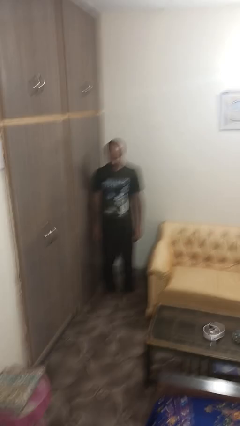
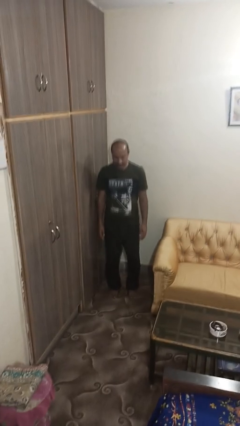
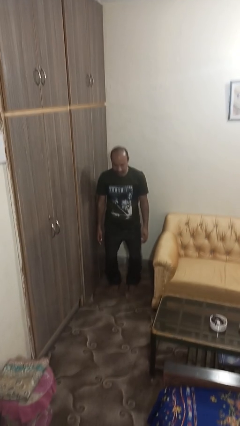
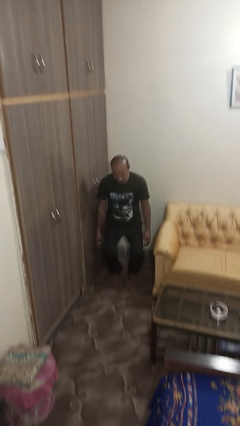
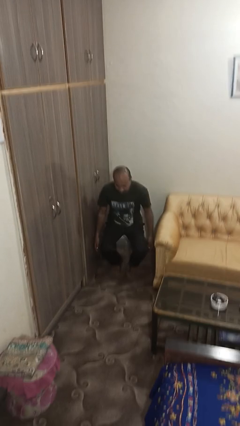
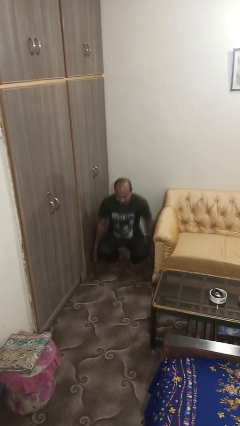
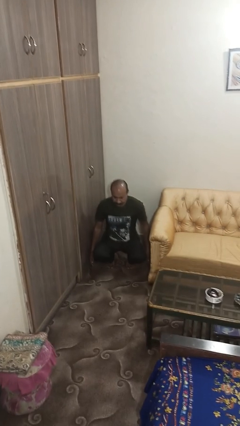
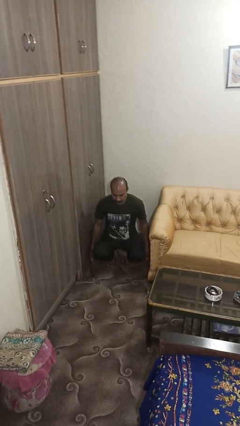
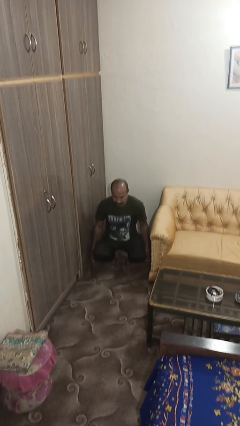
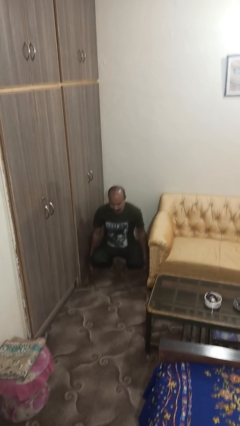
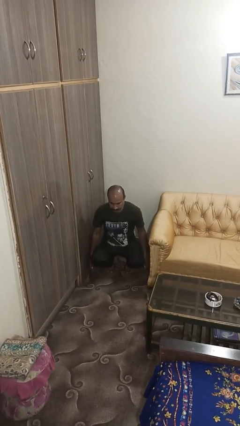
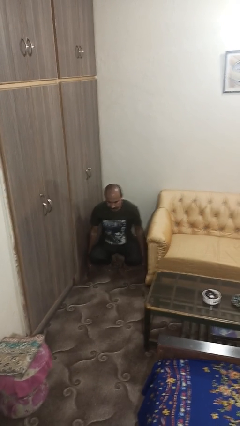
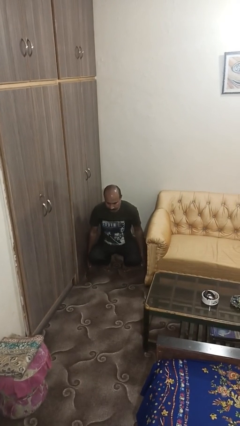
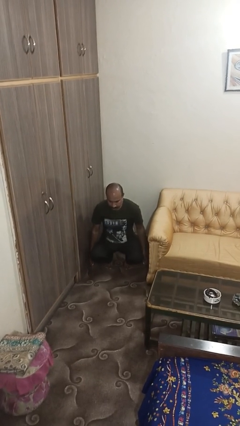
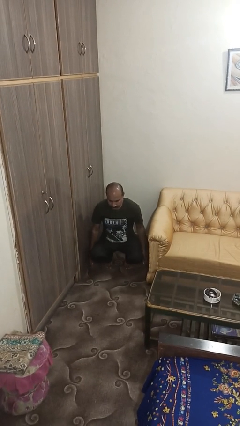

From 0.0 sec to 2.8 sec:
person squats

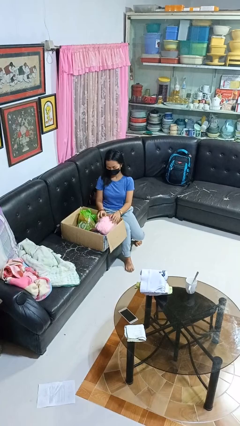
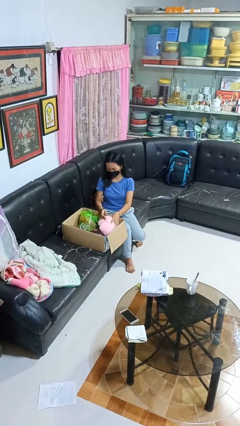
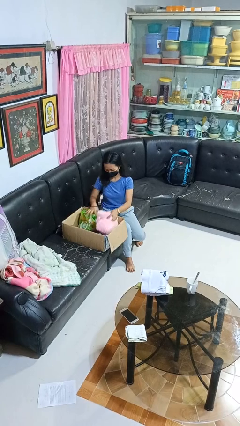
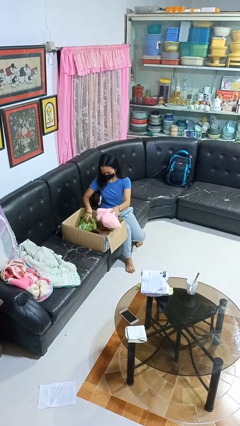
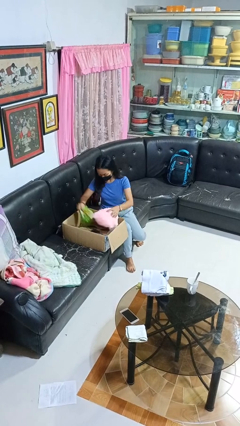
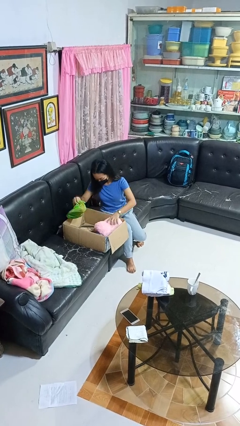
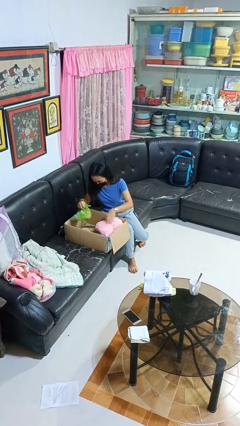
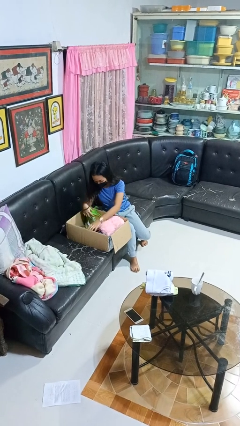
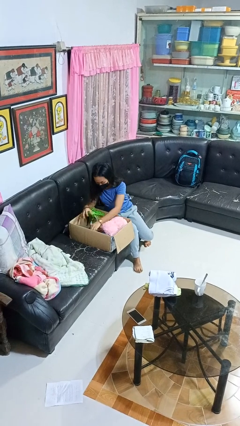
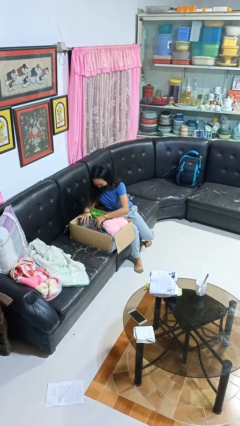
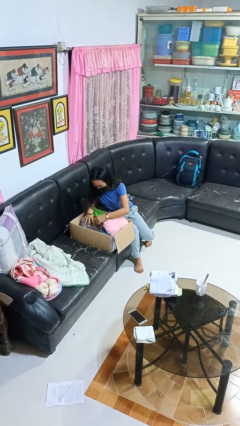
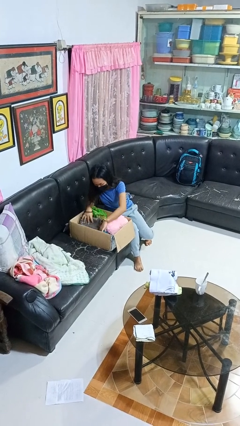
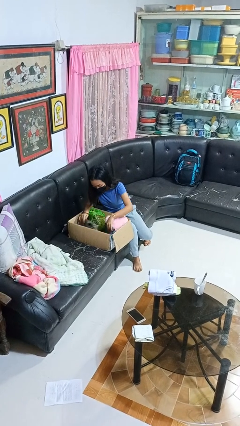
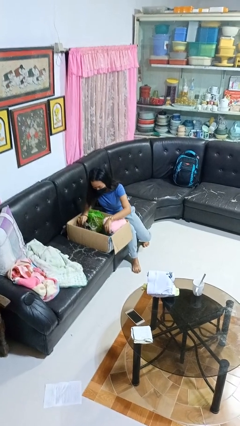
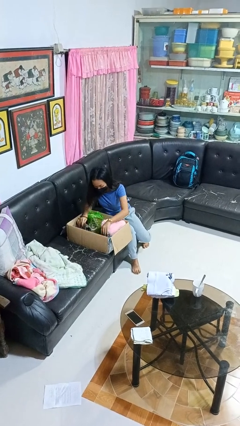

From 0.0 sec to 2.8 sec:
person searches in box

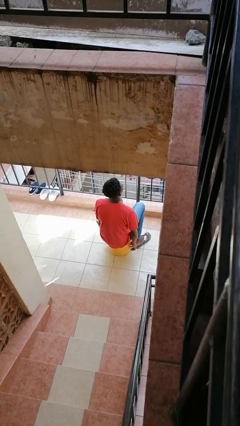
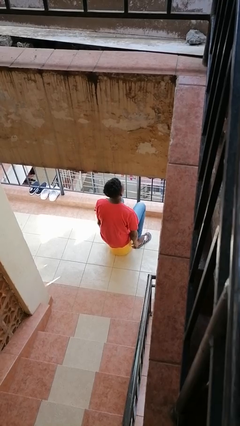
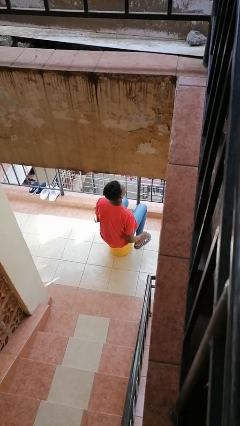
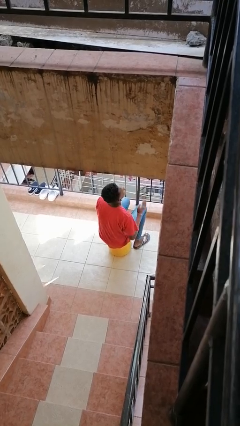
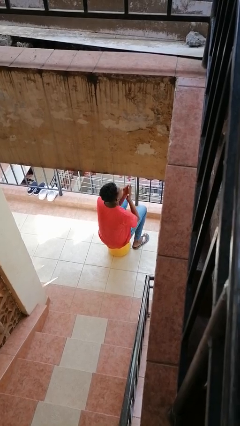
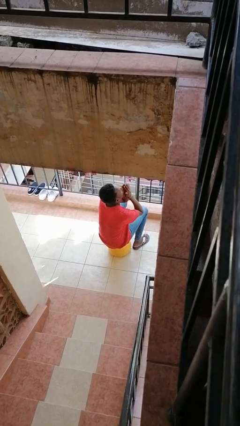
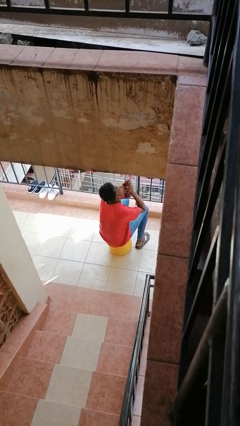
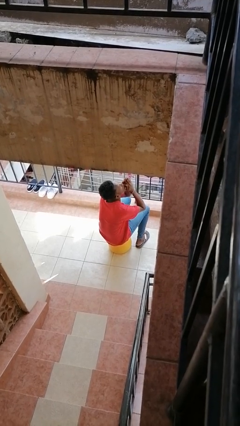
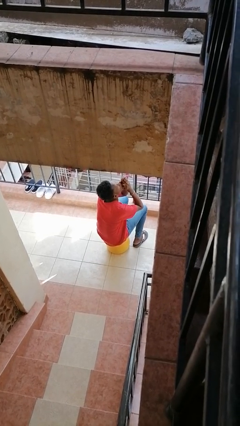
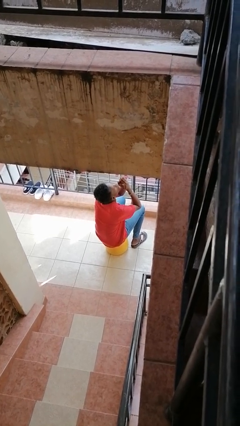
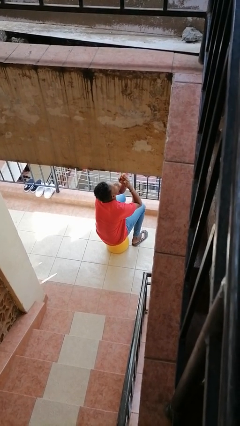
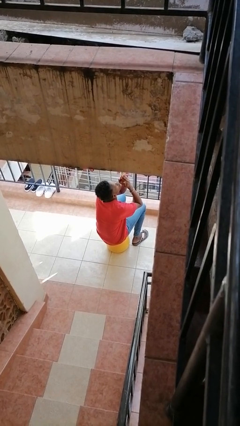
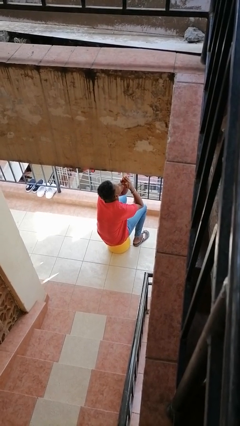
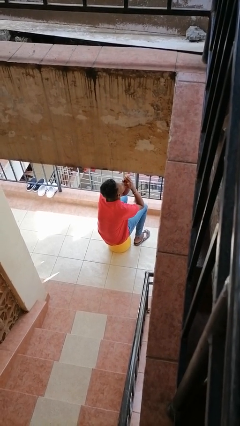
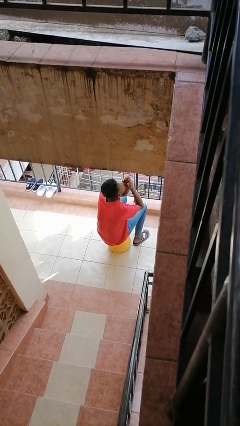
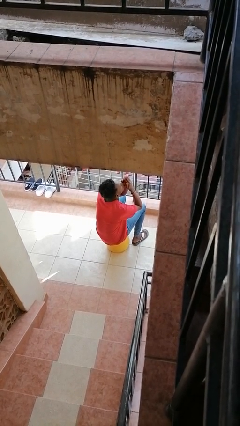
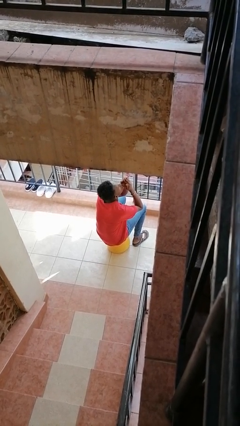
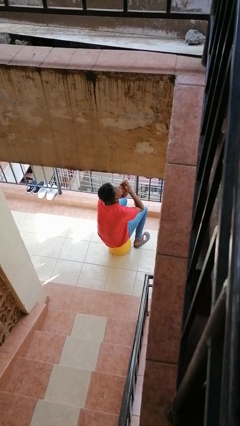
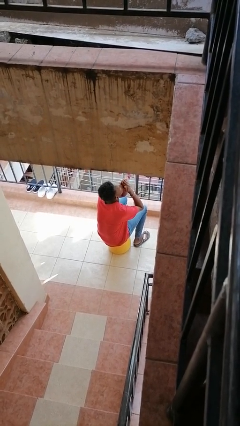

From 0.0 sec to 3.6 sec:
person blows into hands

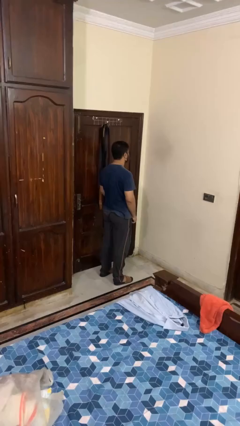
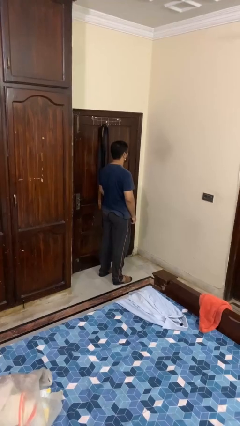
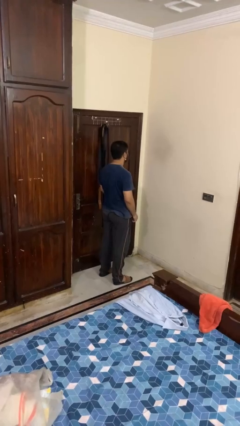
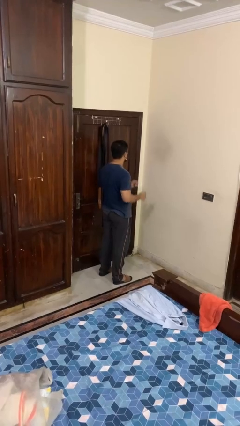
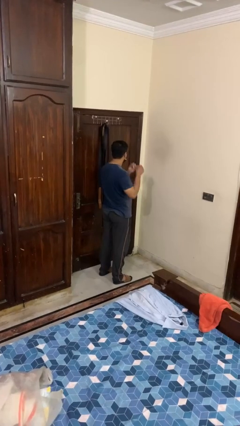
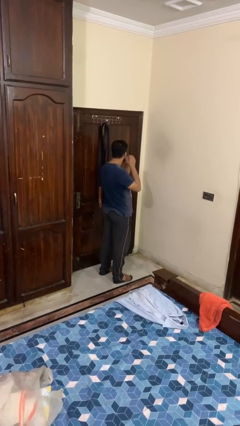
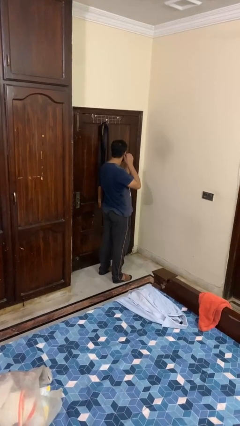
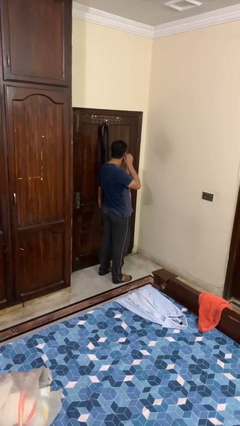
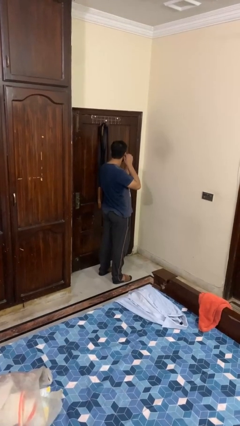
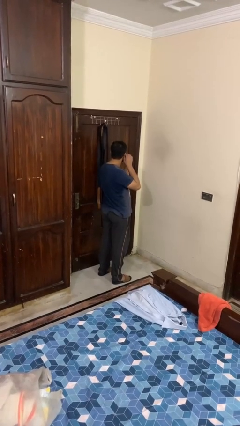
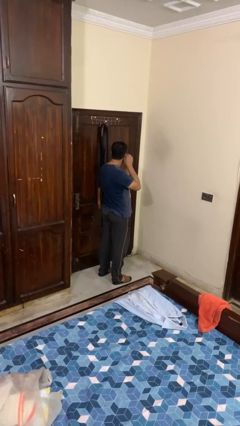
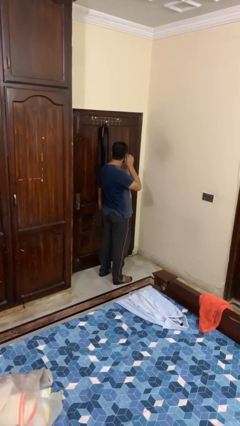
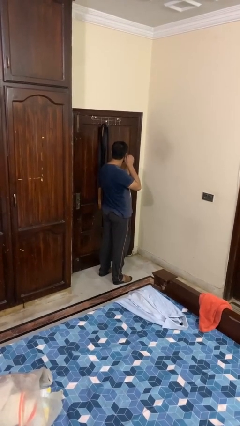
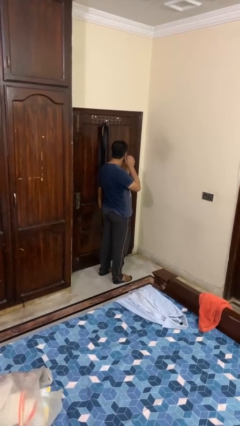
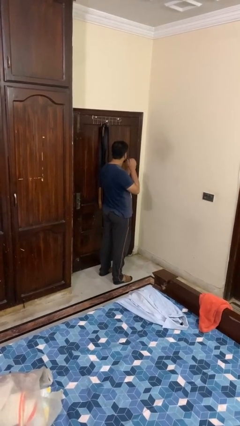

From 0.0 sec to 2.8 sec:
person takes off earrings

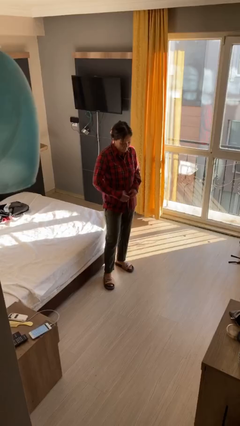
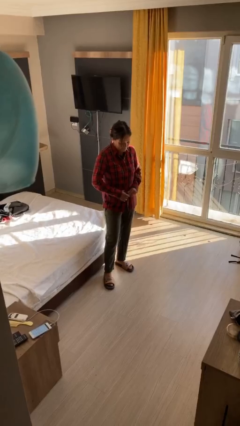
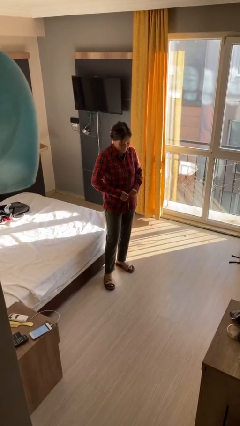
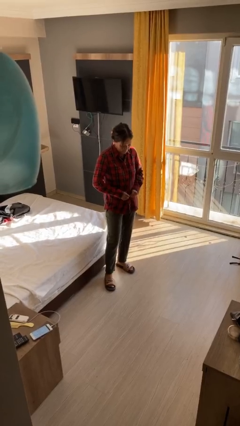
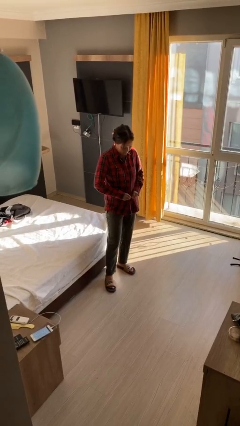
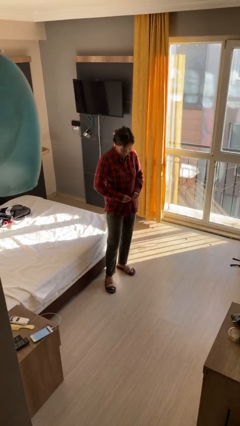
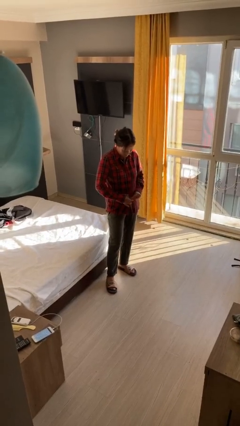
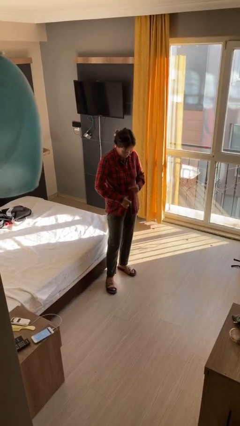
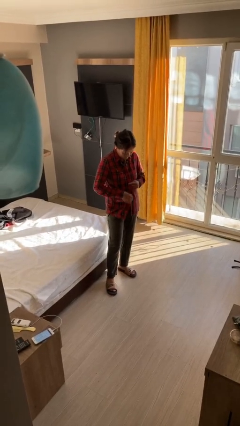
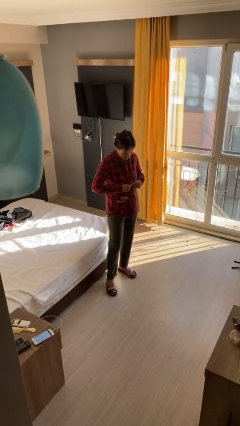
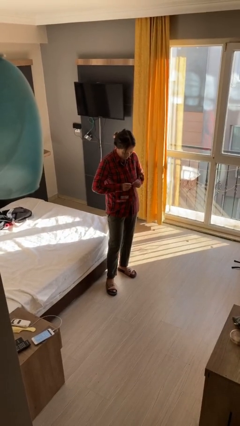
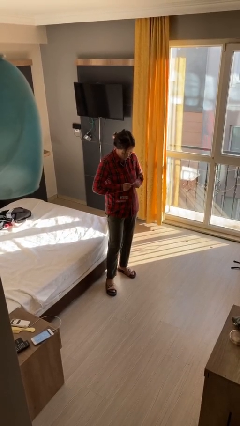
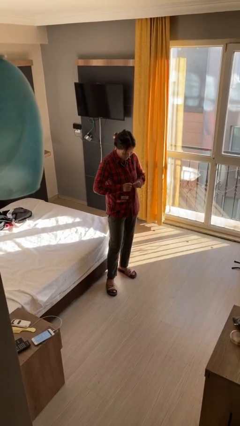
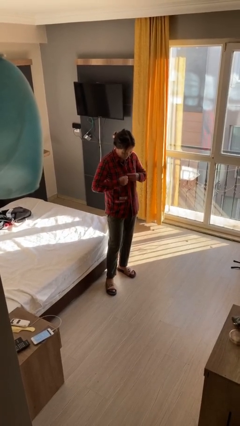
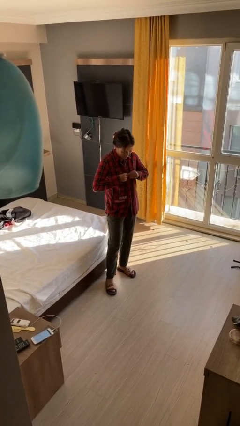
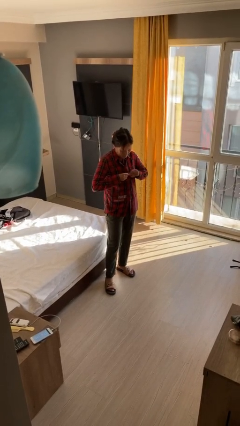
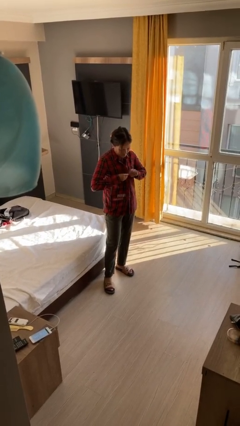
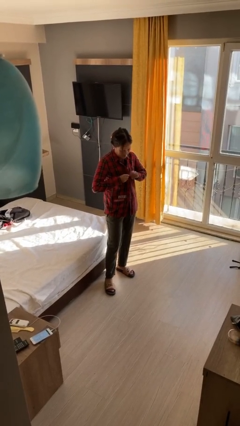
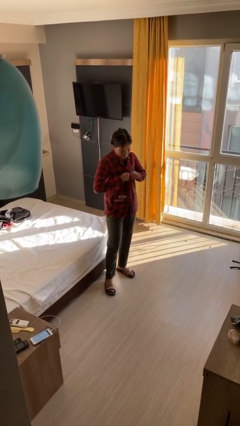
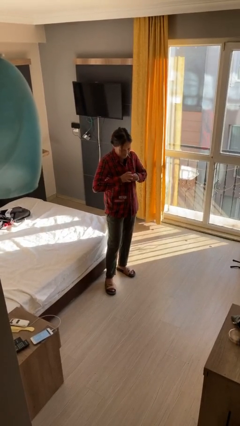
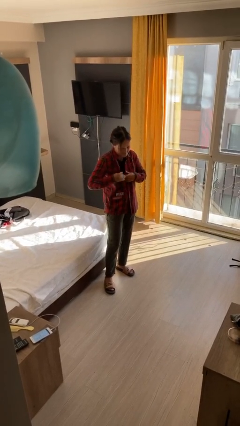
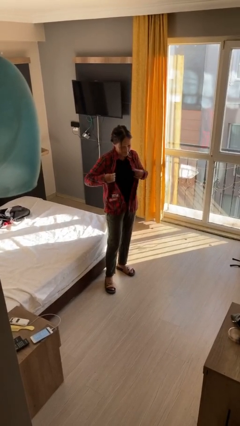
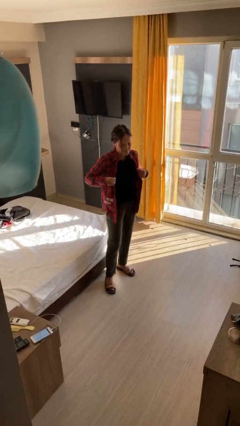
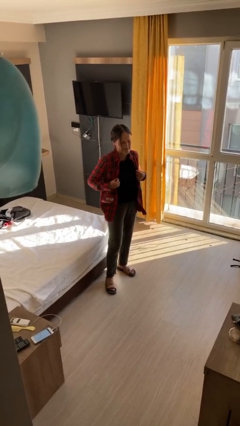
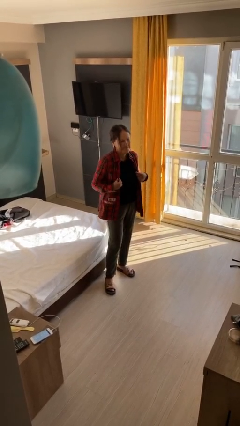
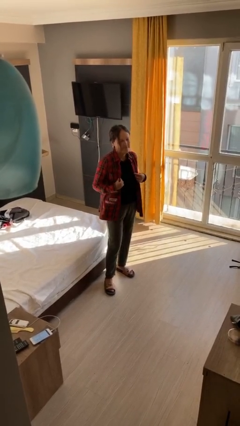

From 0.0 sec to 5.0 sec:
person unbuttons shirt

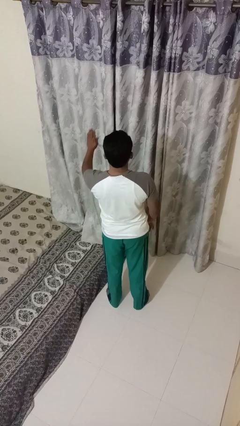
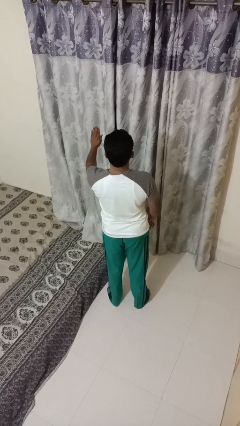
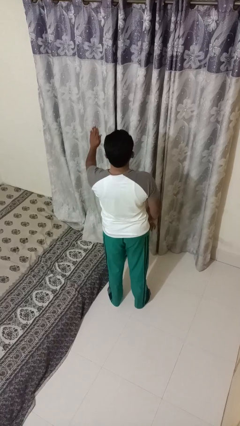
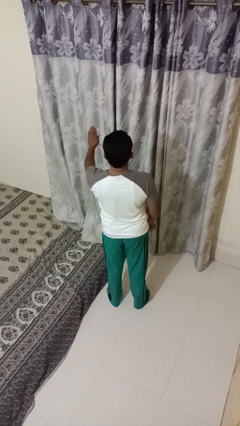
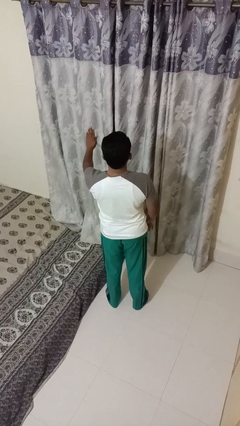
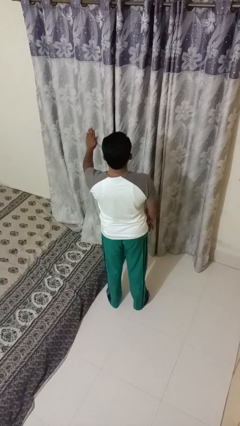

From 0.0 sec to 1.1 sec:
person gestures stop
